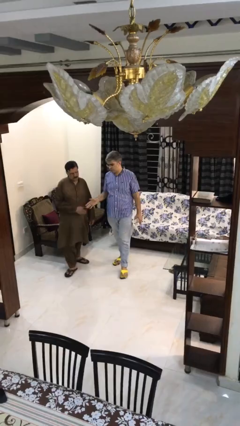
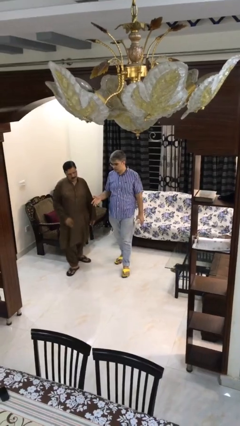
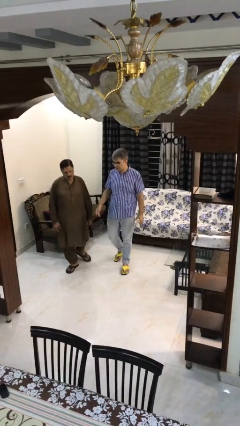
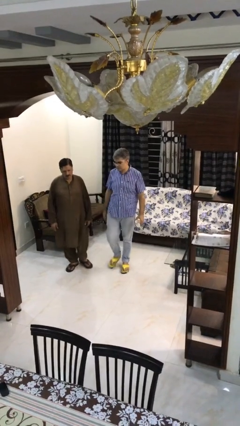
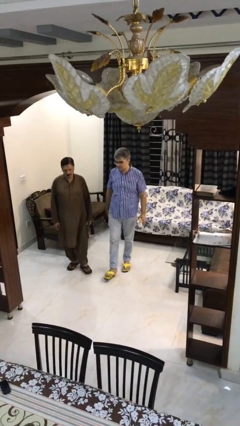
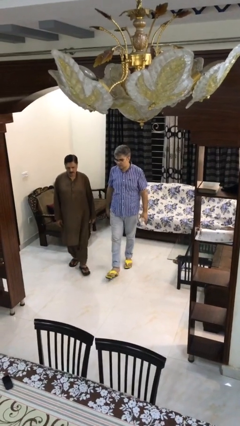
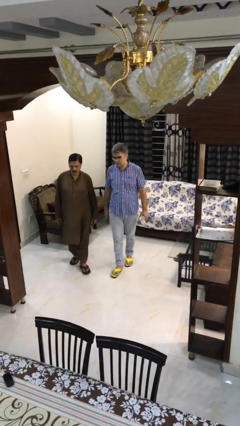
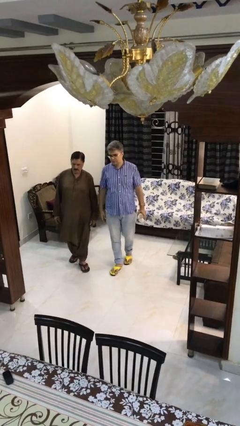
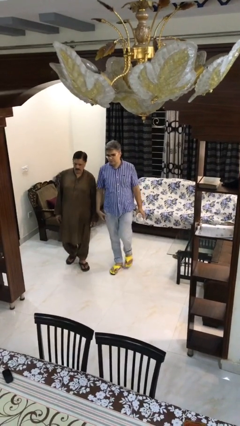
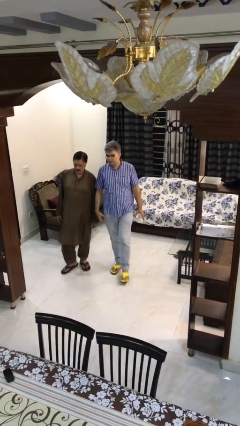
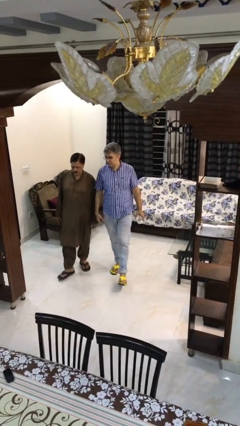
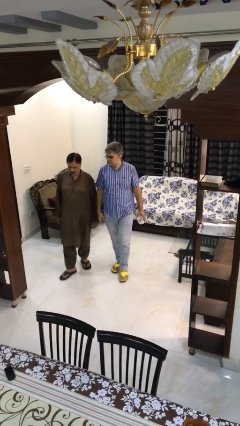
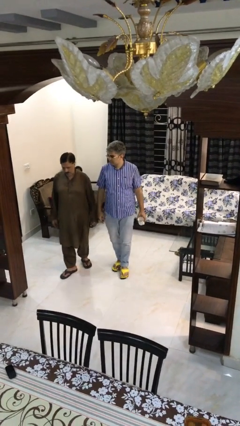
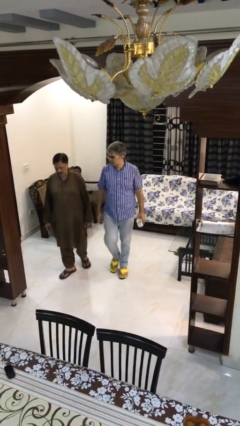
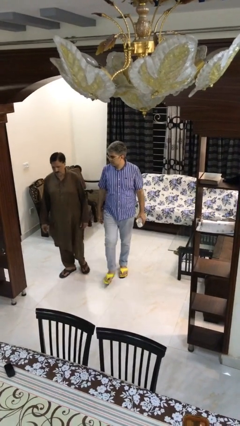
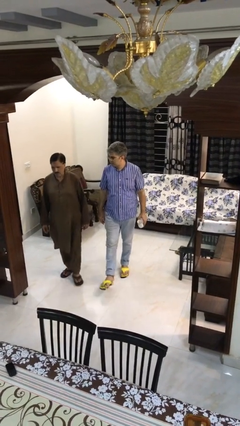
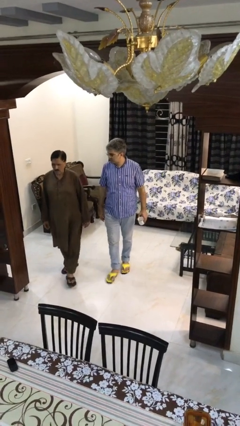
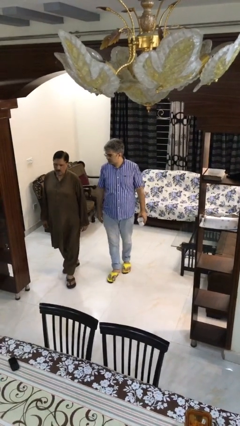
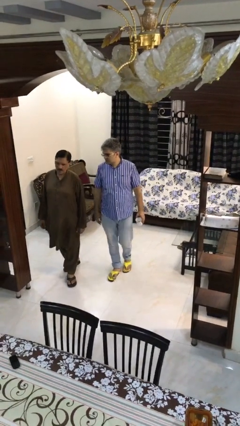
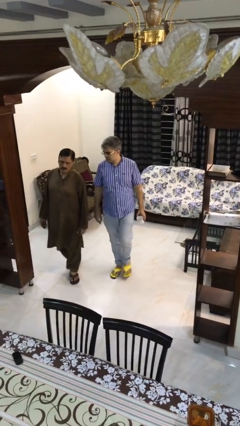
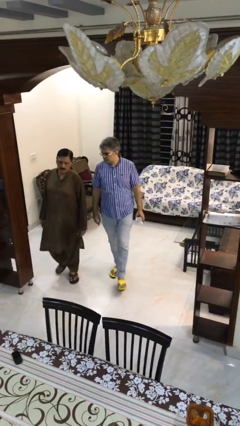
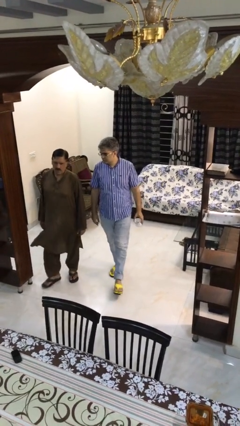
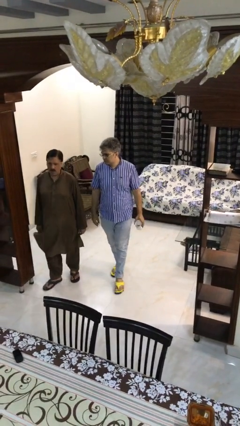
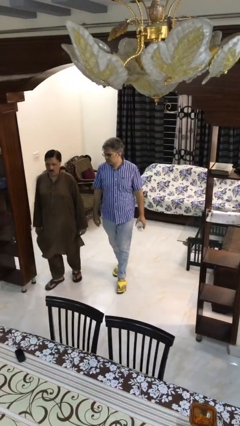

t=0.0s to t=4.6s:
person talks to person

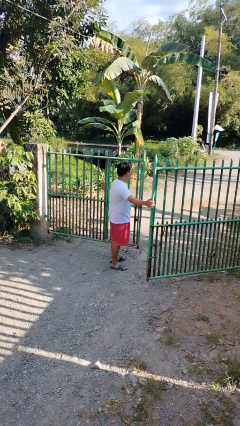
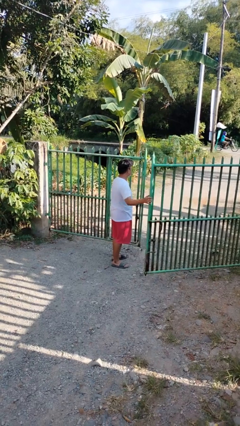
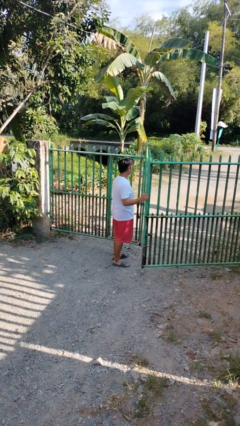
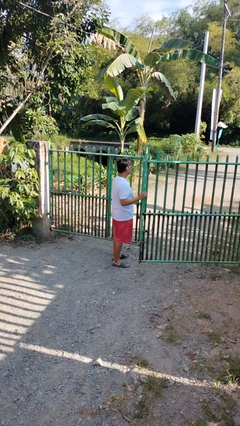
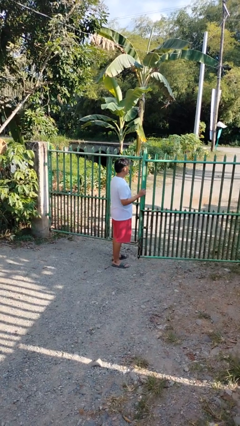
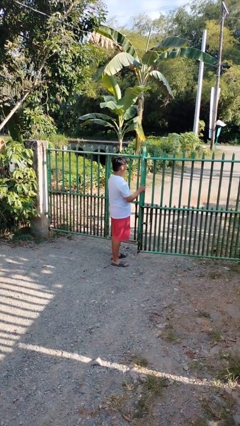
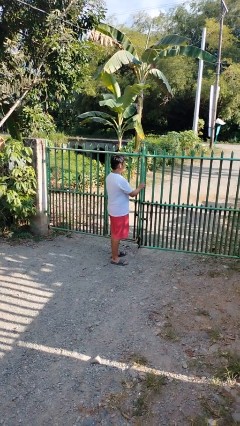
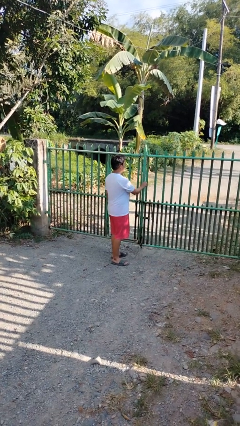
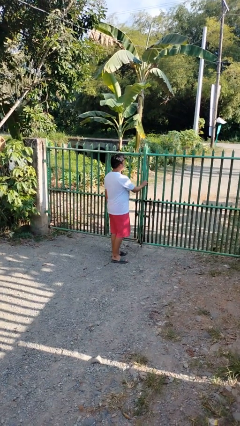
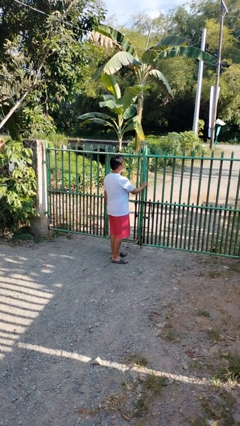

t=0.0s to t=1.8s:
person closes gate

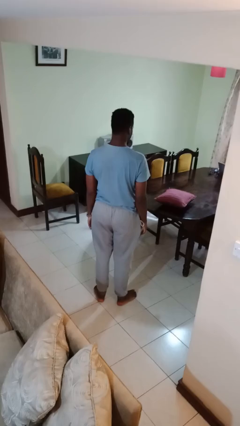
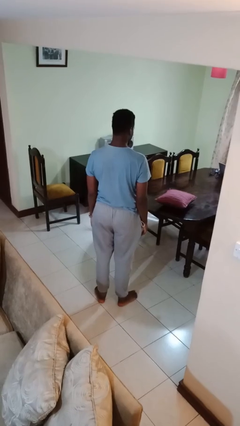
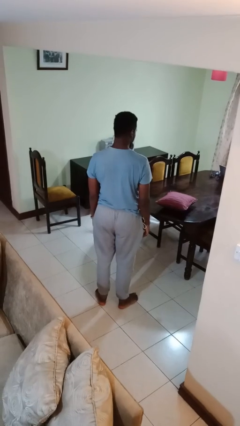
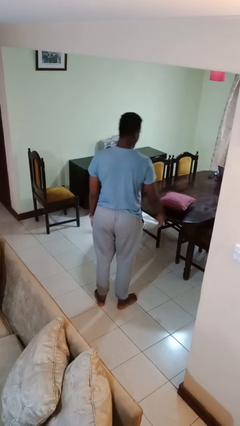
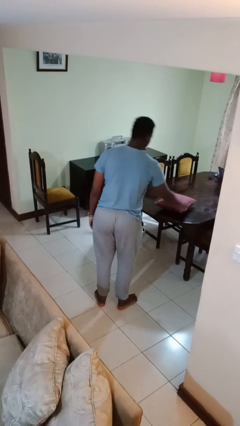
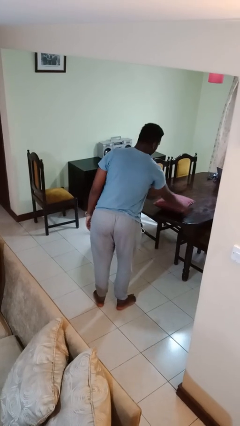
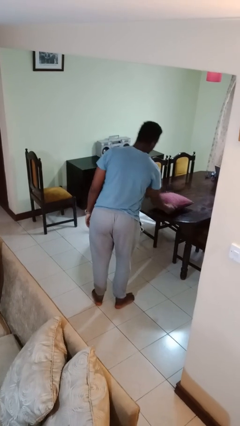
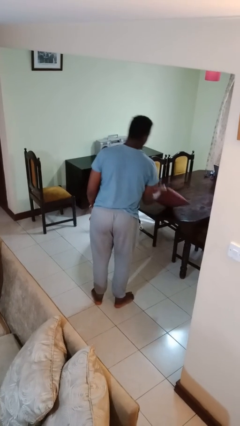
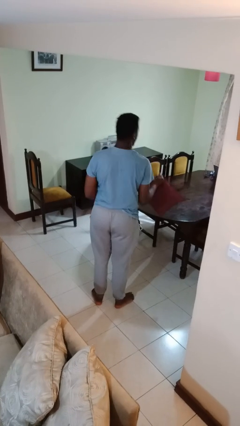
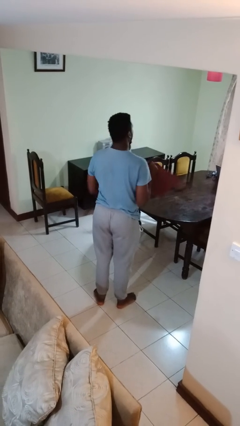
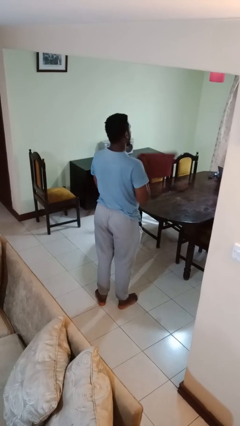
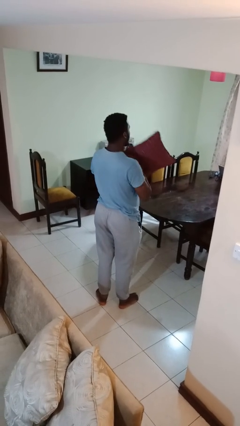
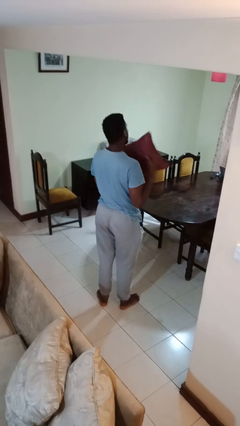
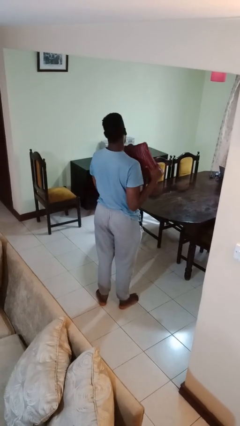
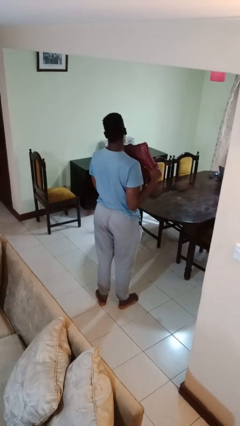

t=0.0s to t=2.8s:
person picks up object from table

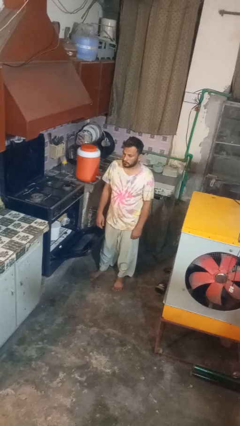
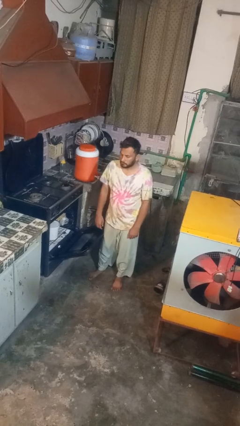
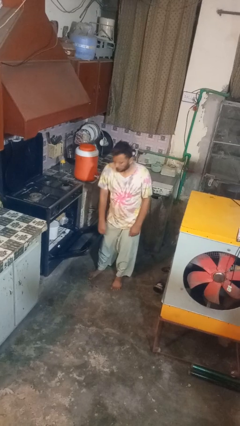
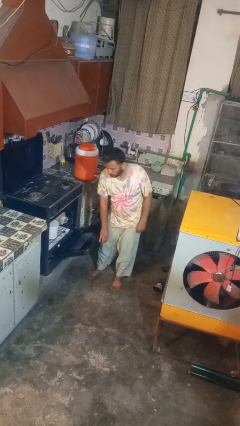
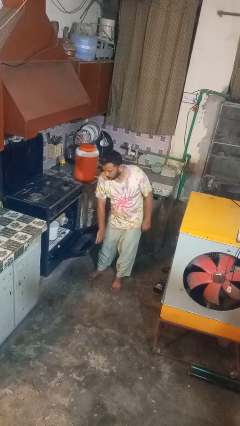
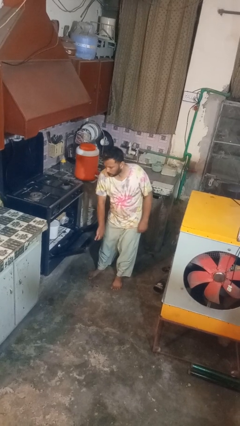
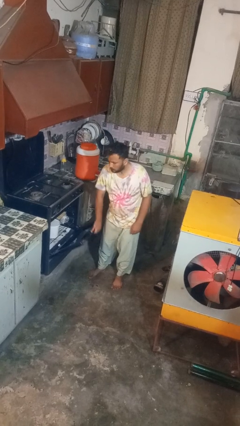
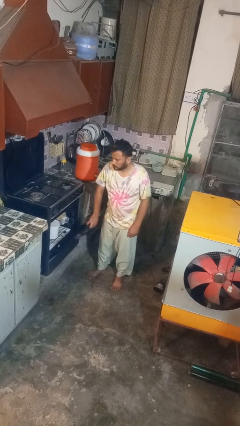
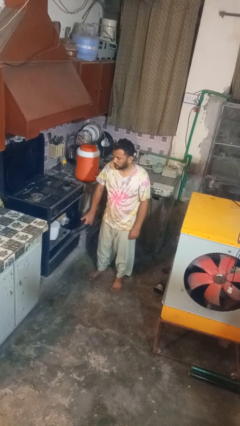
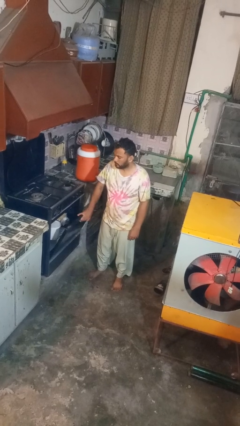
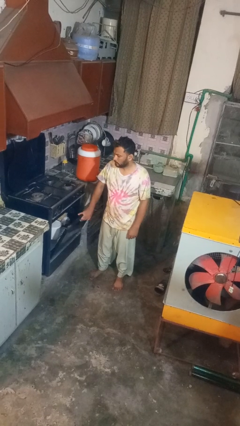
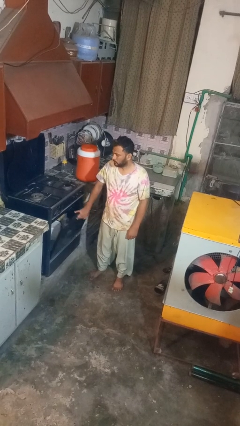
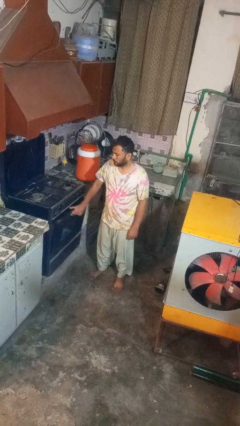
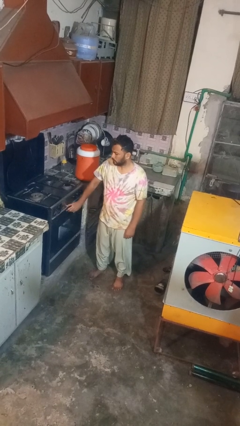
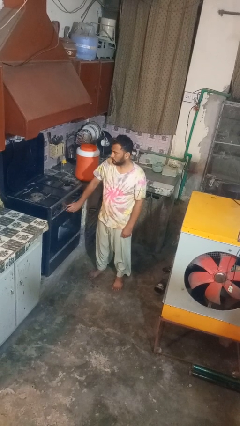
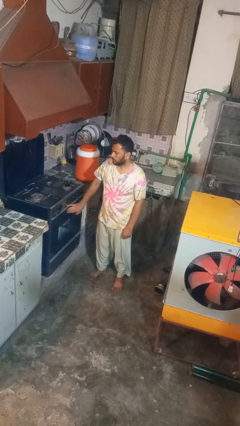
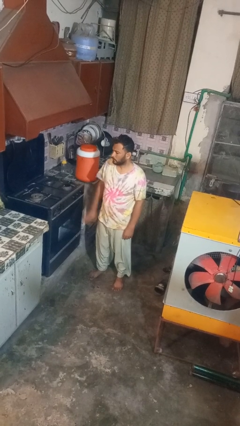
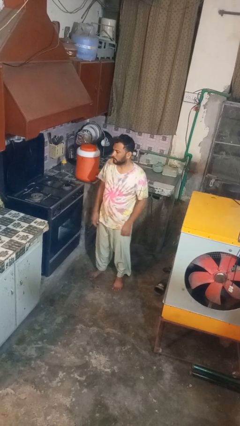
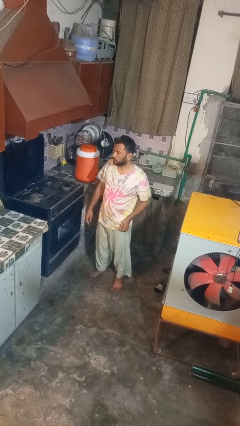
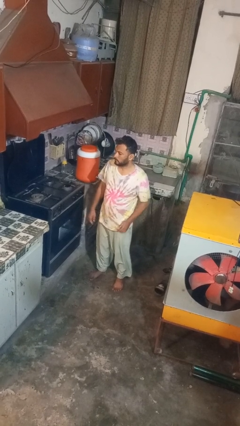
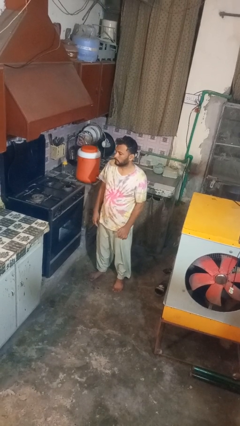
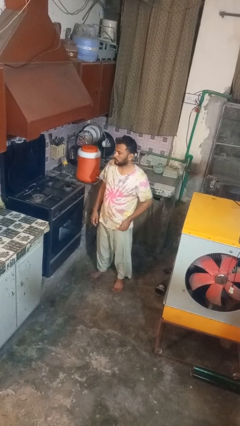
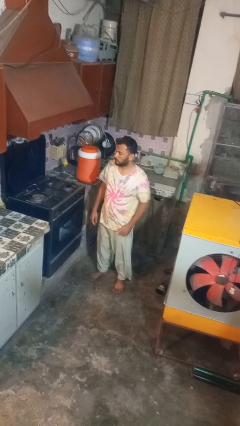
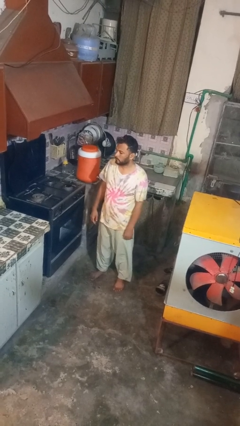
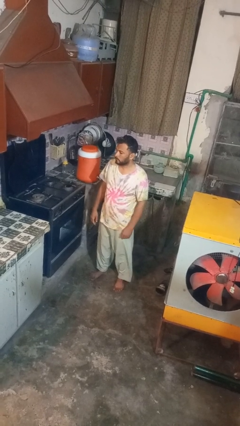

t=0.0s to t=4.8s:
person closes oven door

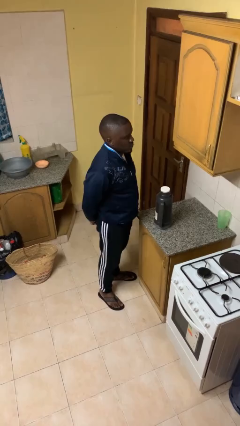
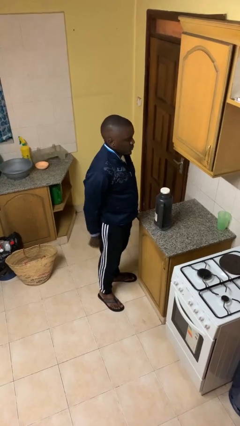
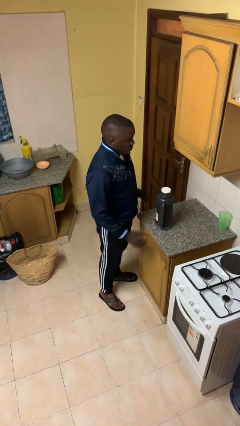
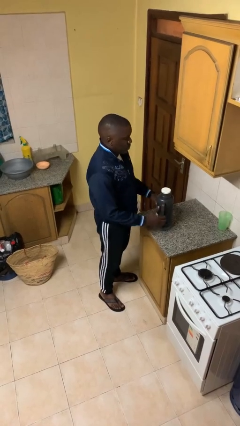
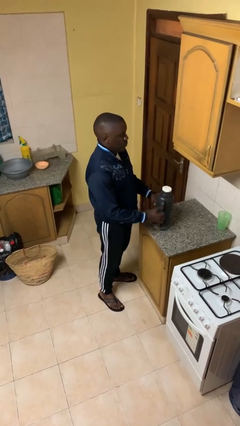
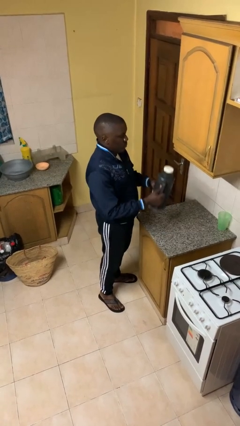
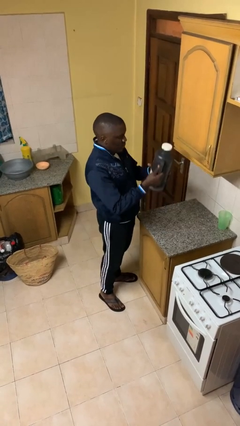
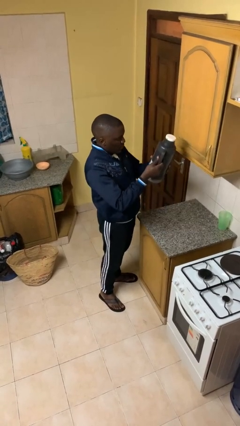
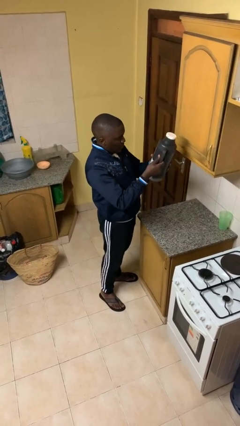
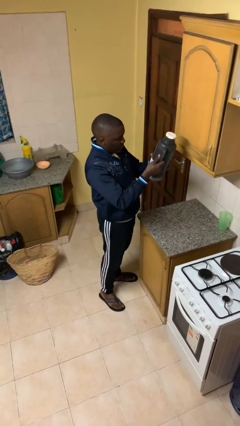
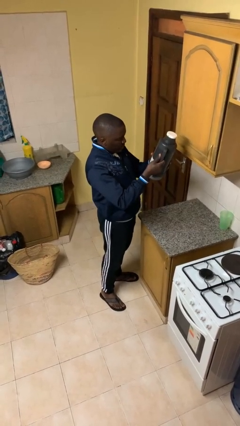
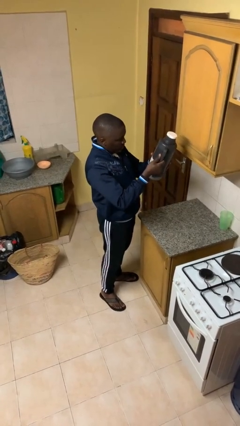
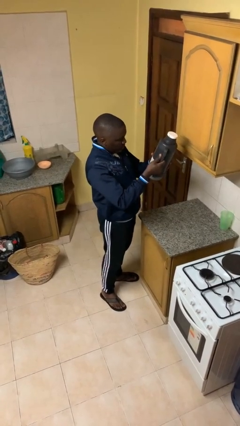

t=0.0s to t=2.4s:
person picks up object from countertop

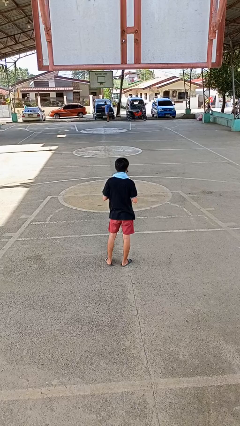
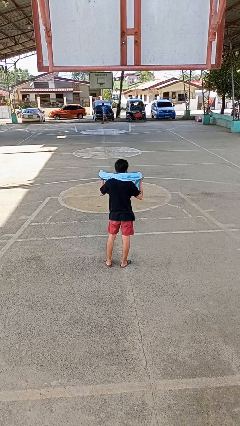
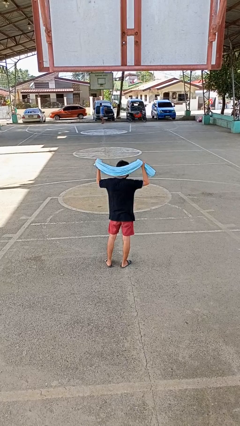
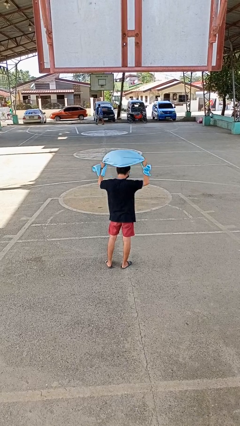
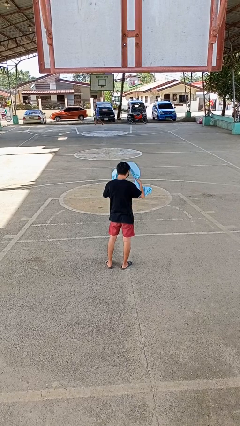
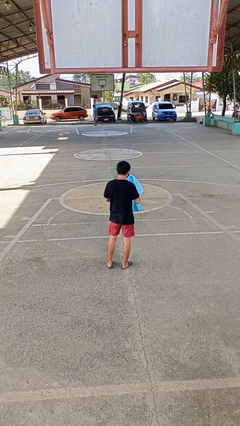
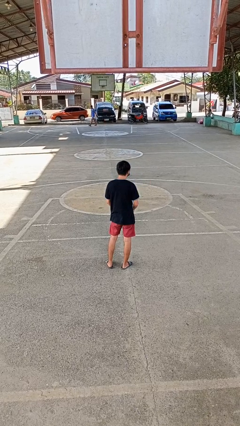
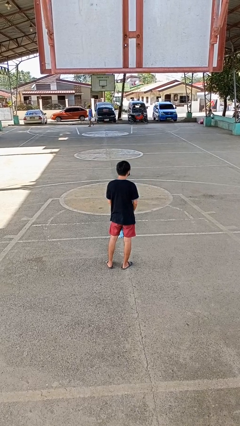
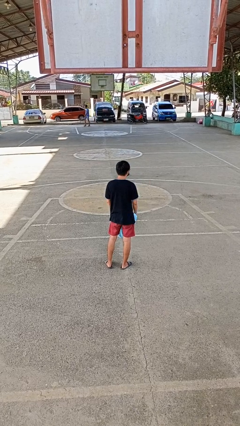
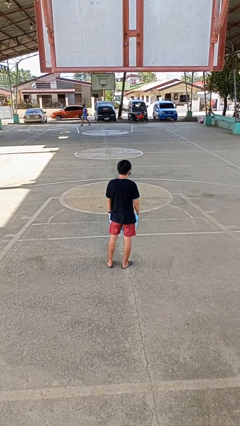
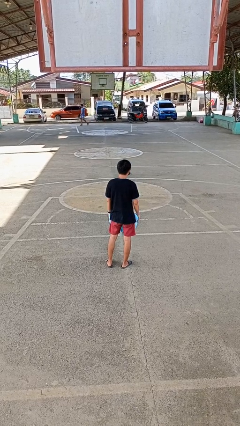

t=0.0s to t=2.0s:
person takes off scarf
